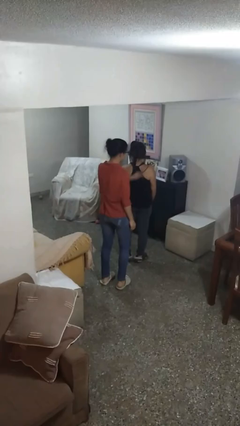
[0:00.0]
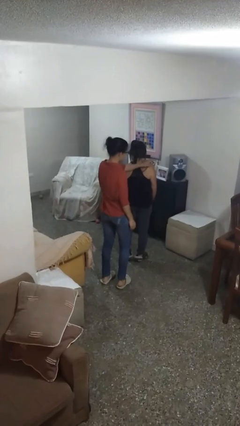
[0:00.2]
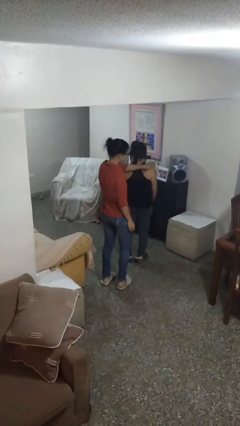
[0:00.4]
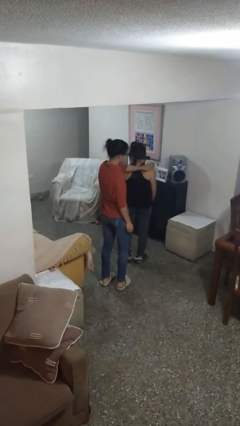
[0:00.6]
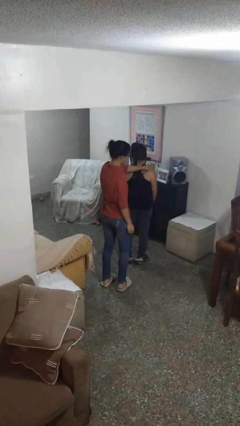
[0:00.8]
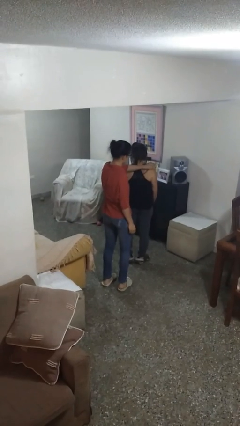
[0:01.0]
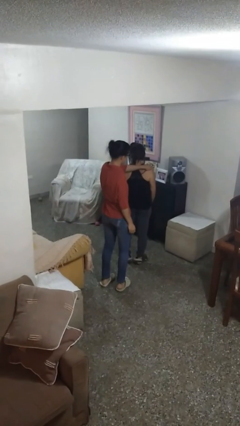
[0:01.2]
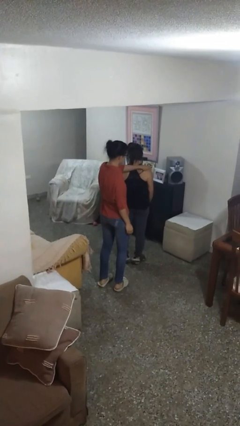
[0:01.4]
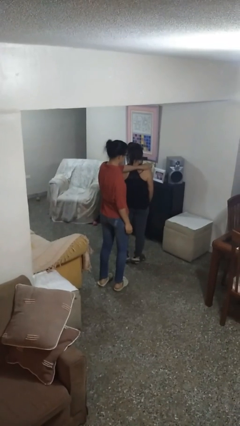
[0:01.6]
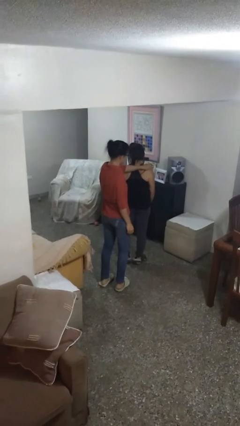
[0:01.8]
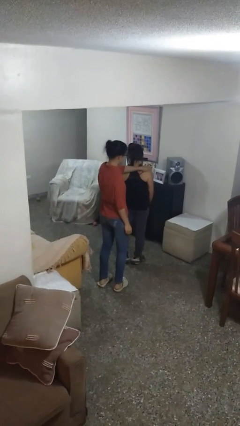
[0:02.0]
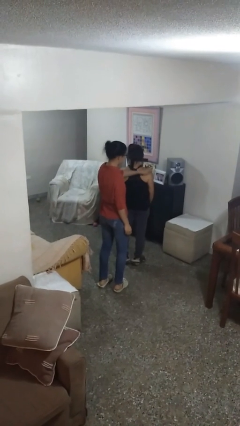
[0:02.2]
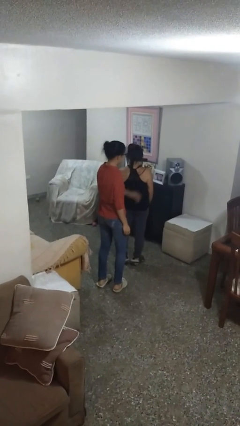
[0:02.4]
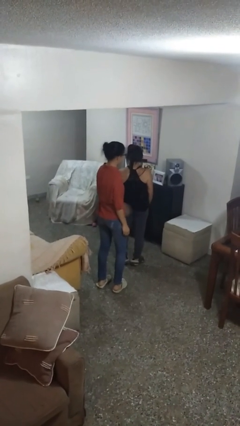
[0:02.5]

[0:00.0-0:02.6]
person touches back of person

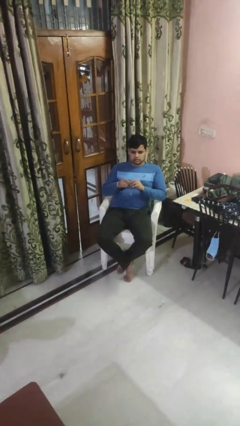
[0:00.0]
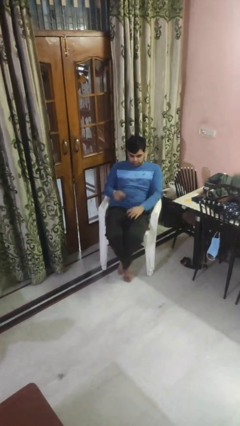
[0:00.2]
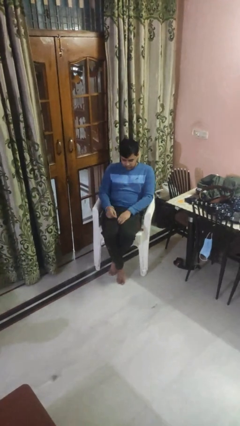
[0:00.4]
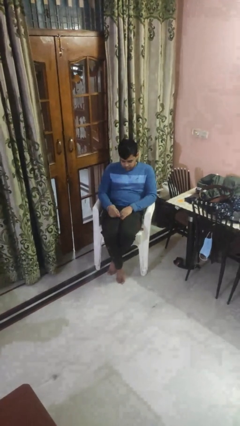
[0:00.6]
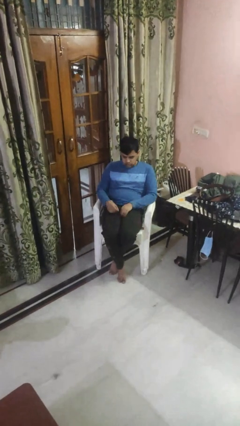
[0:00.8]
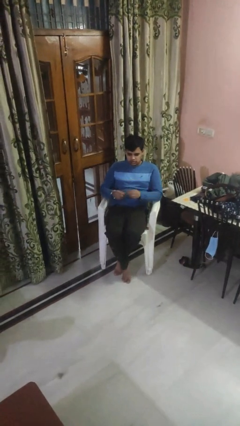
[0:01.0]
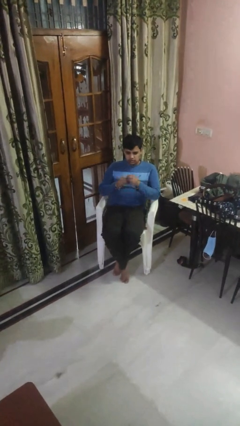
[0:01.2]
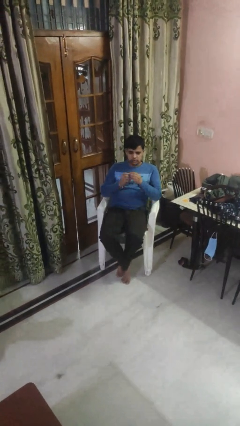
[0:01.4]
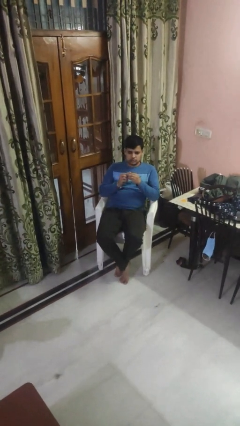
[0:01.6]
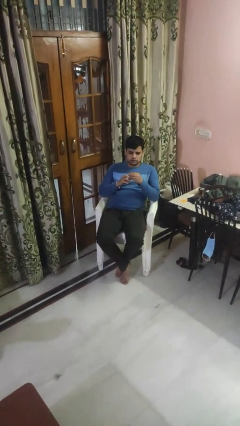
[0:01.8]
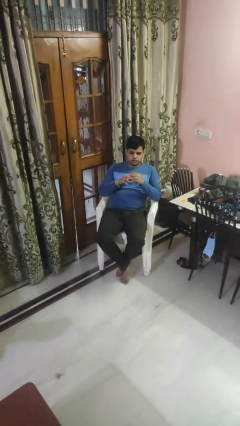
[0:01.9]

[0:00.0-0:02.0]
person puts on ring

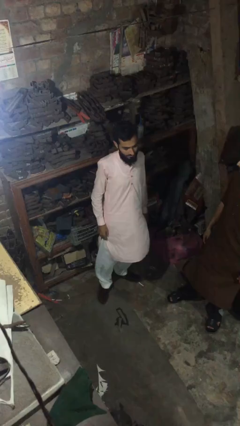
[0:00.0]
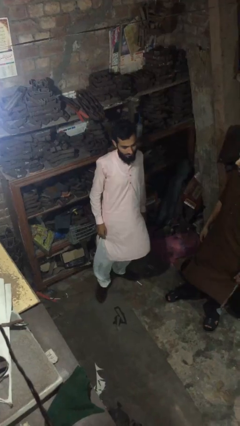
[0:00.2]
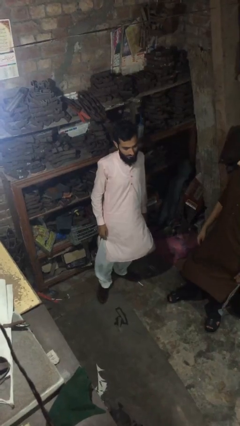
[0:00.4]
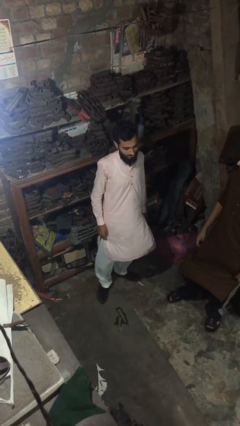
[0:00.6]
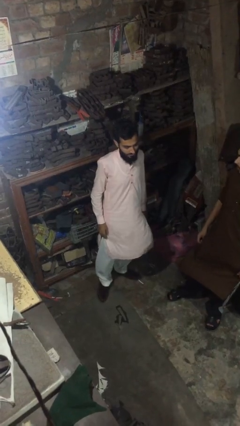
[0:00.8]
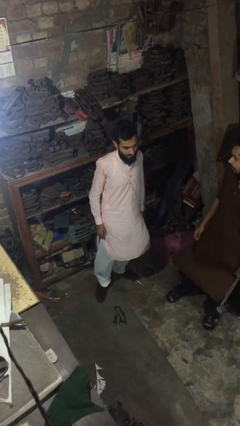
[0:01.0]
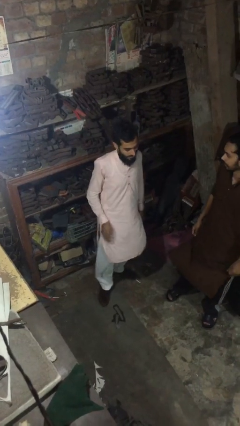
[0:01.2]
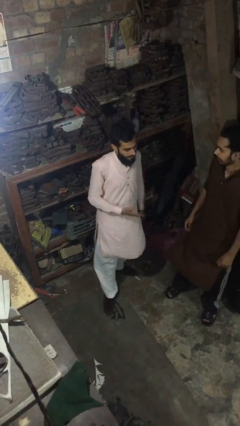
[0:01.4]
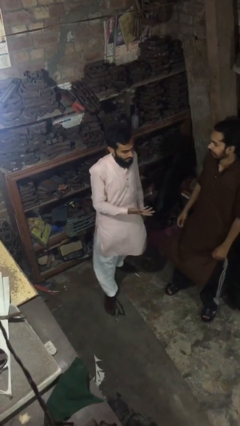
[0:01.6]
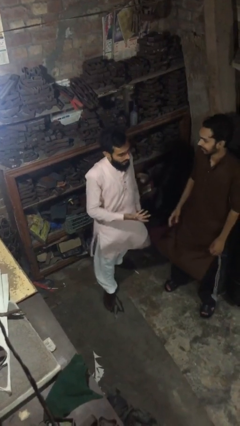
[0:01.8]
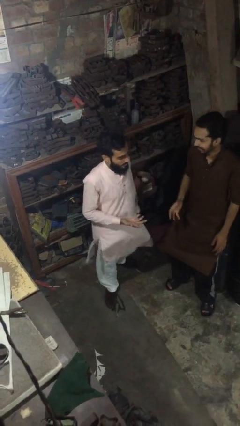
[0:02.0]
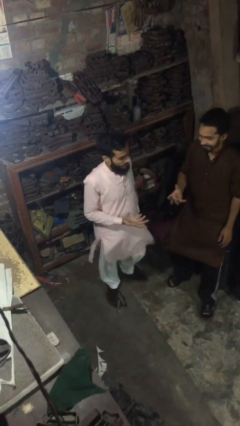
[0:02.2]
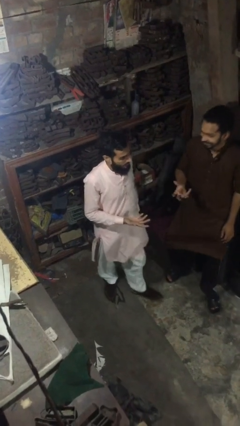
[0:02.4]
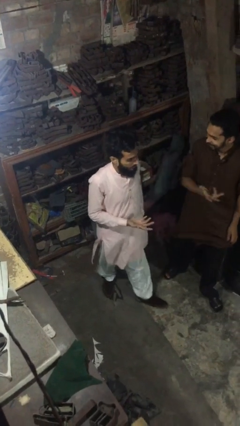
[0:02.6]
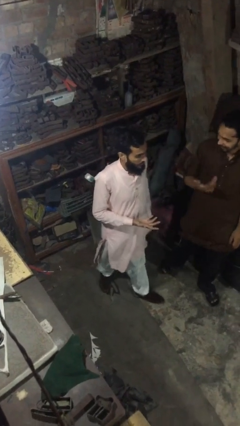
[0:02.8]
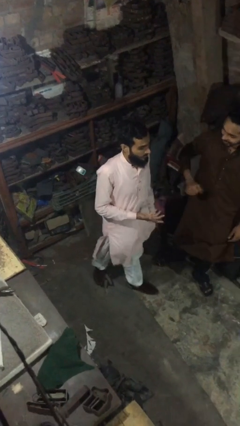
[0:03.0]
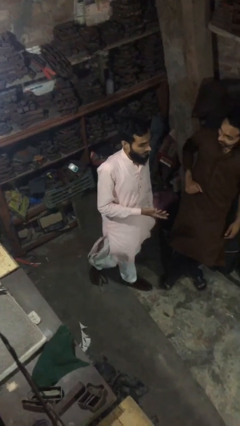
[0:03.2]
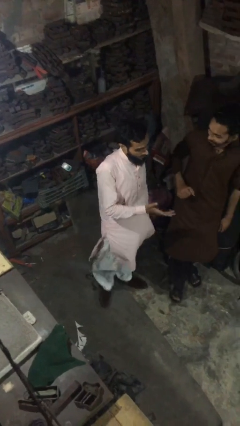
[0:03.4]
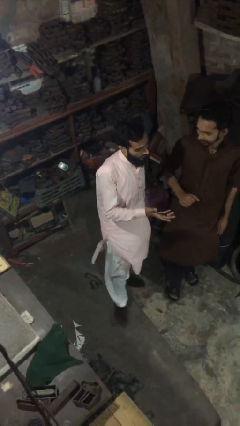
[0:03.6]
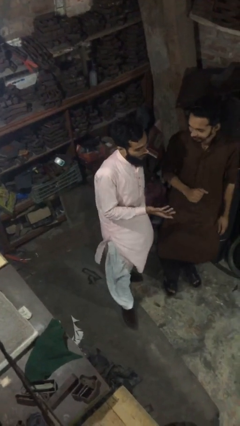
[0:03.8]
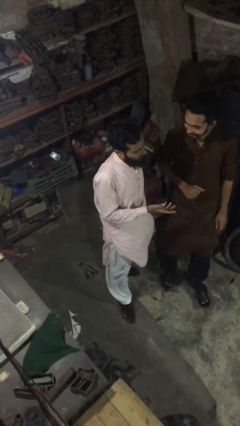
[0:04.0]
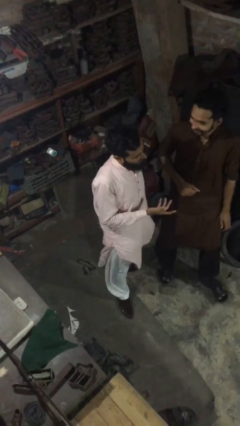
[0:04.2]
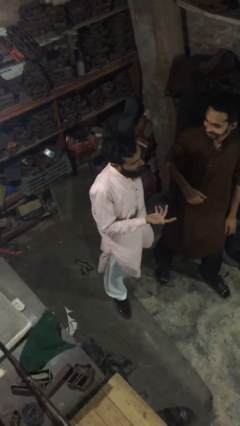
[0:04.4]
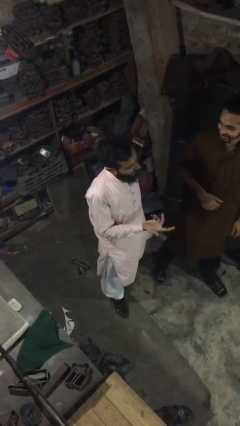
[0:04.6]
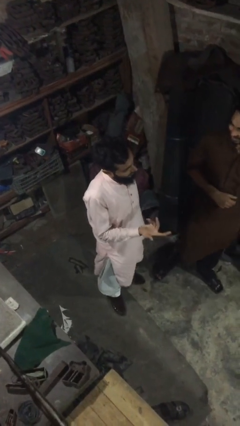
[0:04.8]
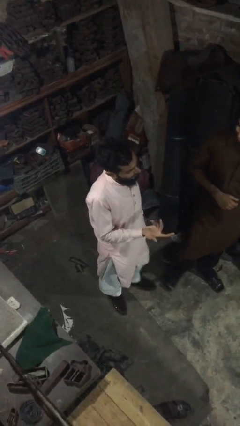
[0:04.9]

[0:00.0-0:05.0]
person talks to person

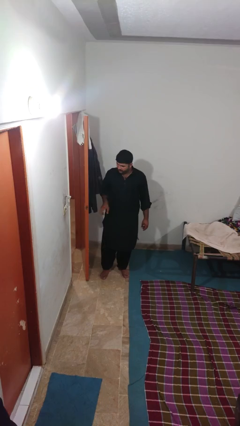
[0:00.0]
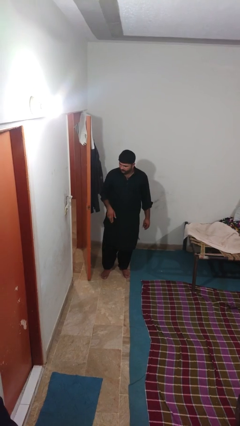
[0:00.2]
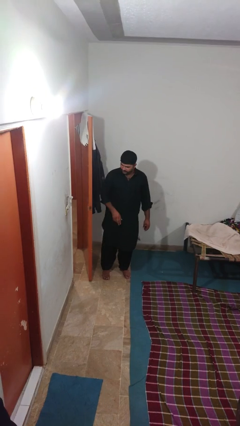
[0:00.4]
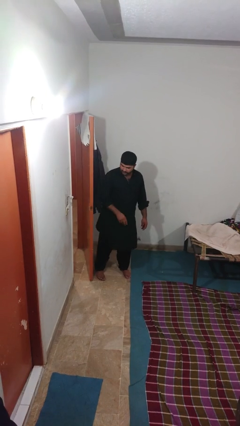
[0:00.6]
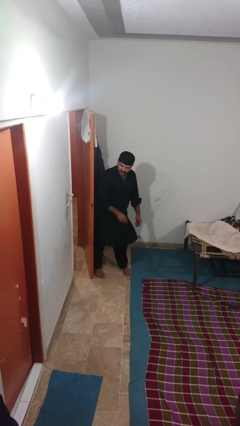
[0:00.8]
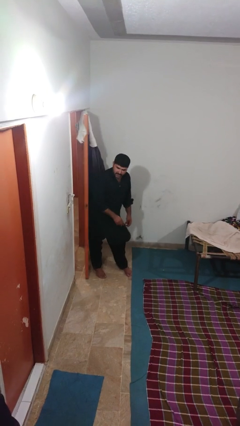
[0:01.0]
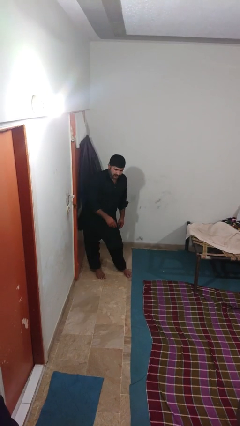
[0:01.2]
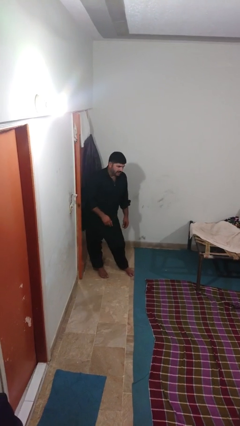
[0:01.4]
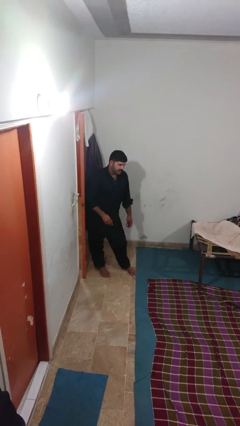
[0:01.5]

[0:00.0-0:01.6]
person closes door with hip

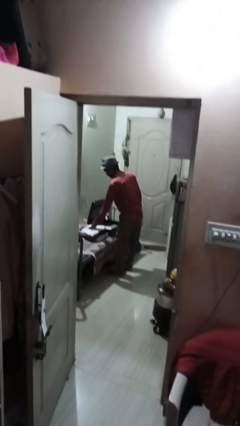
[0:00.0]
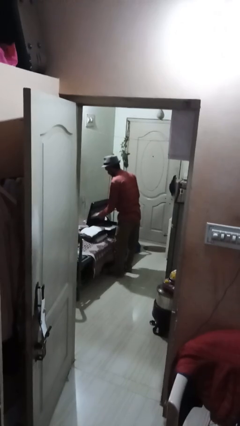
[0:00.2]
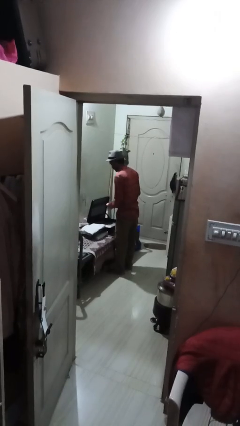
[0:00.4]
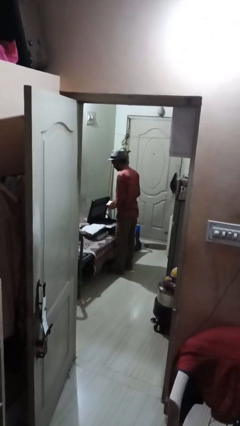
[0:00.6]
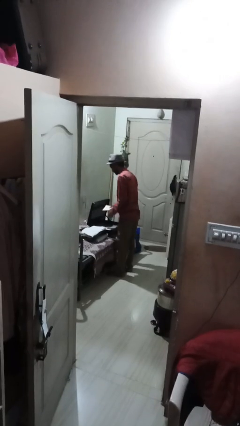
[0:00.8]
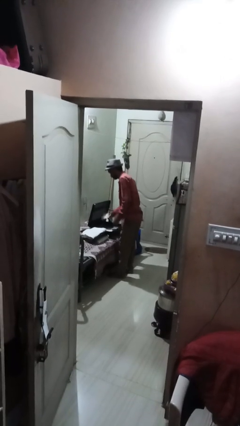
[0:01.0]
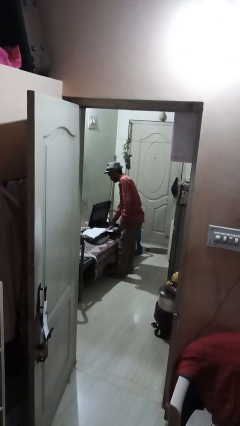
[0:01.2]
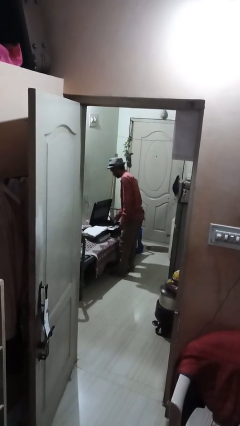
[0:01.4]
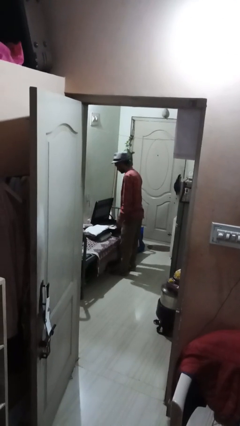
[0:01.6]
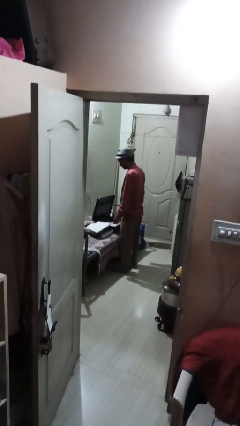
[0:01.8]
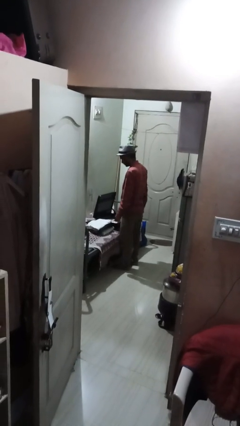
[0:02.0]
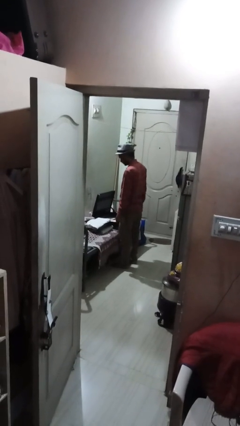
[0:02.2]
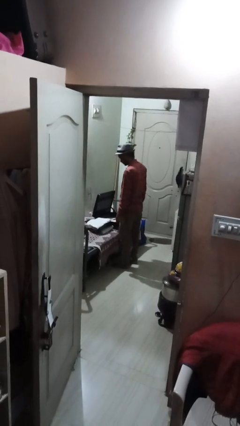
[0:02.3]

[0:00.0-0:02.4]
person loads clothes into suitcase

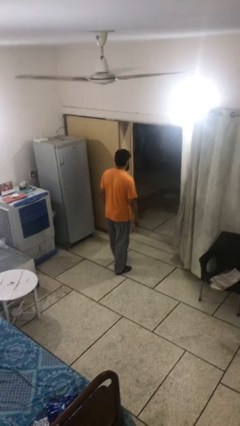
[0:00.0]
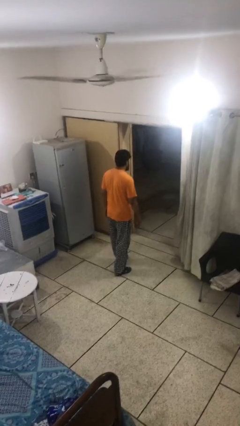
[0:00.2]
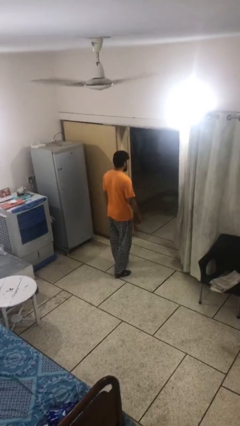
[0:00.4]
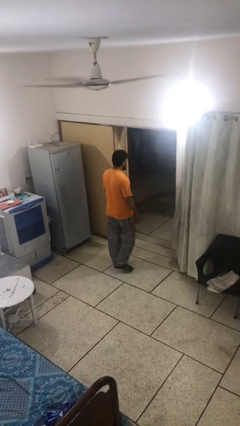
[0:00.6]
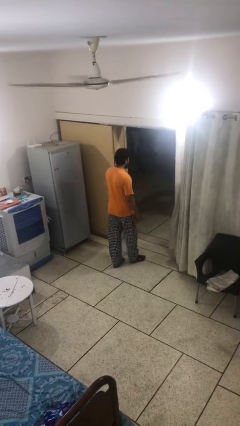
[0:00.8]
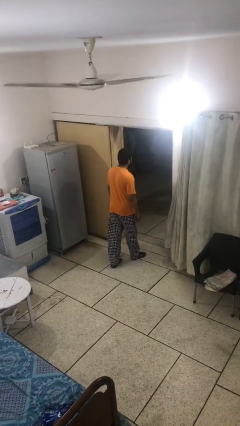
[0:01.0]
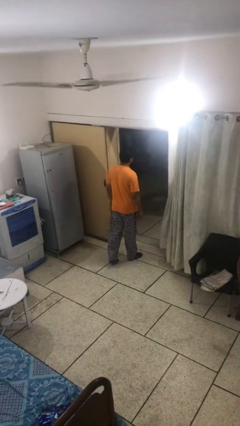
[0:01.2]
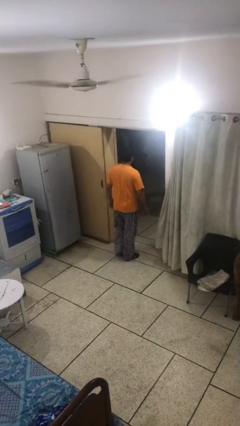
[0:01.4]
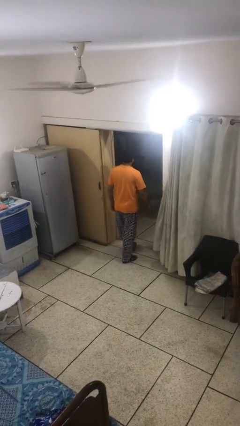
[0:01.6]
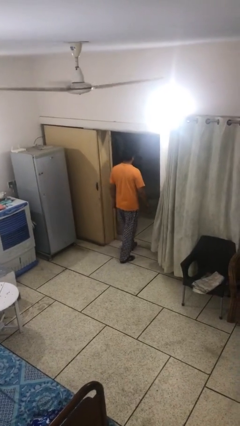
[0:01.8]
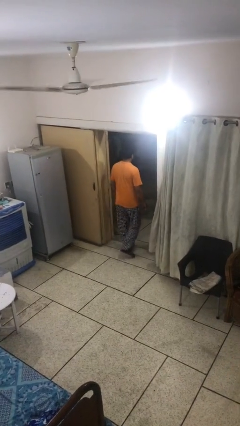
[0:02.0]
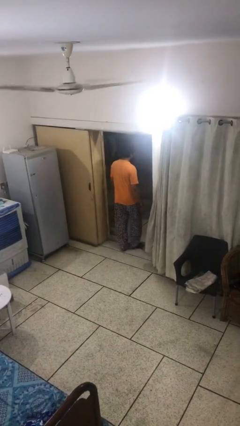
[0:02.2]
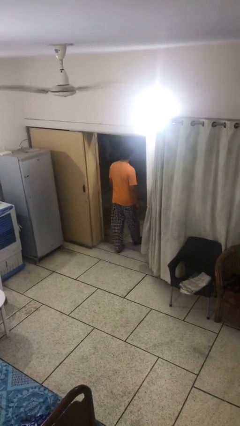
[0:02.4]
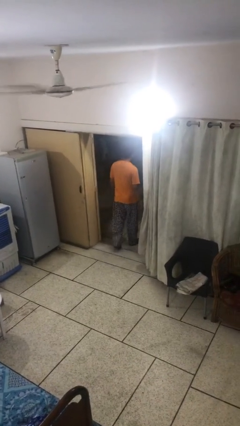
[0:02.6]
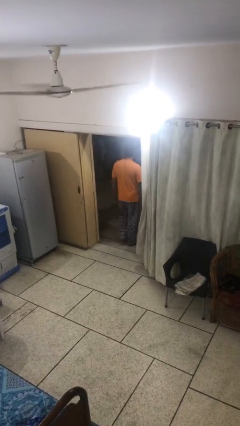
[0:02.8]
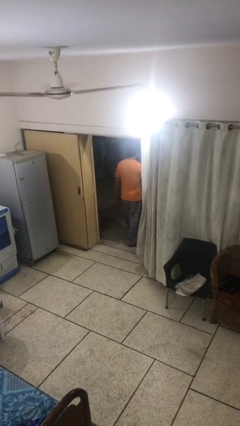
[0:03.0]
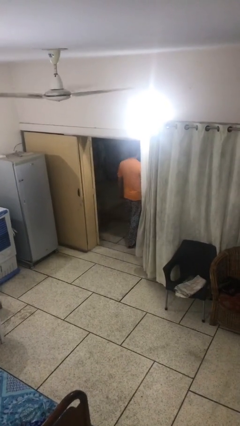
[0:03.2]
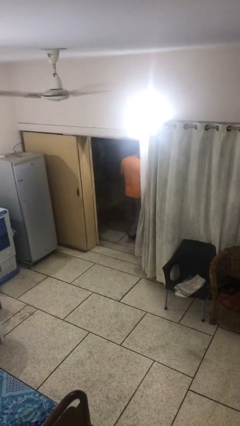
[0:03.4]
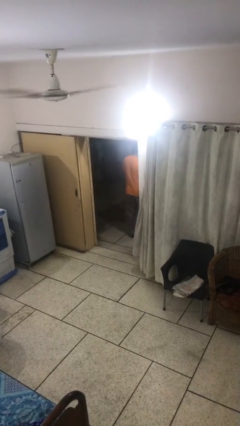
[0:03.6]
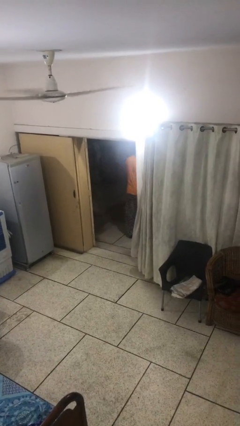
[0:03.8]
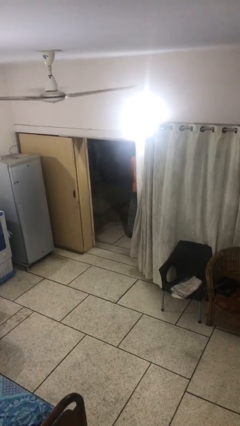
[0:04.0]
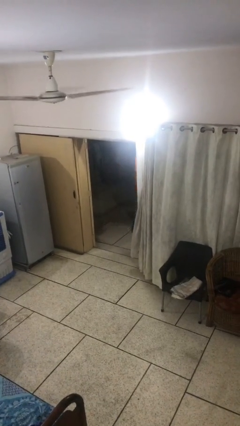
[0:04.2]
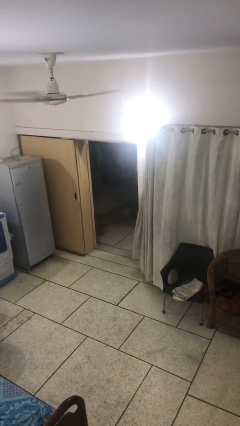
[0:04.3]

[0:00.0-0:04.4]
person exits scene through structure
